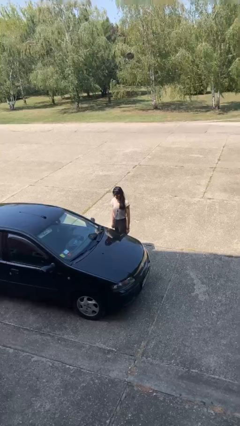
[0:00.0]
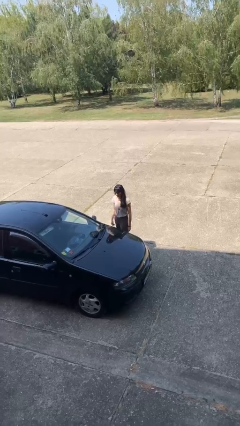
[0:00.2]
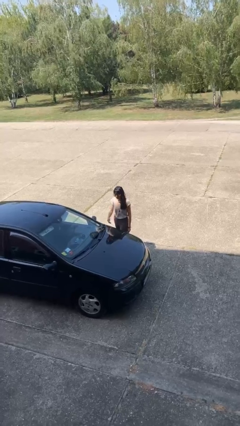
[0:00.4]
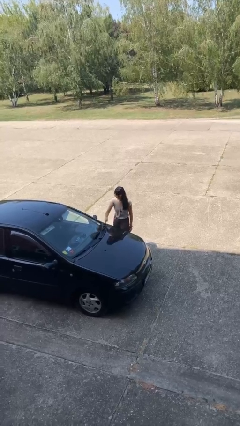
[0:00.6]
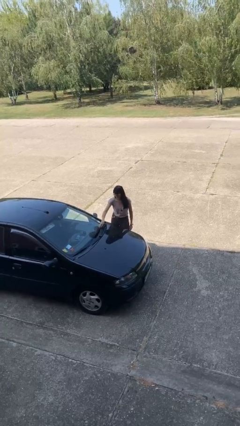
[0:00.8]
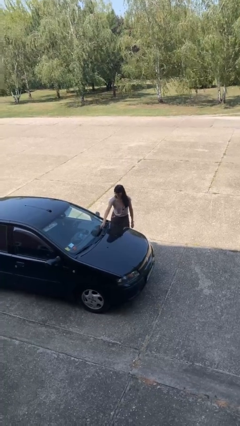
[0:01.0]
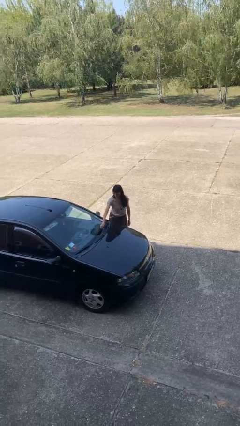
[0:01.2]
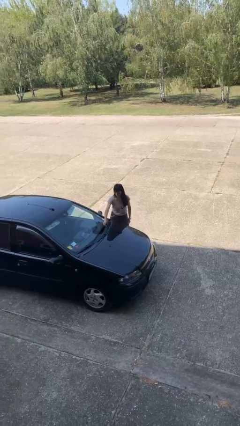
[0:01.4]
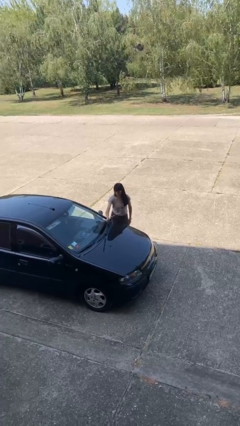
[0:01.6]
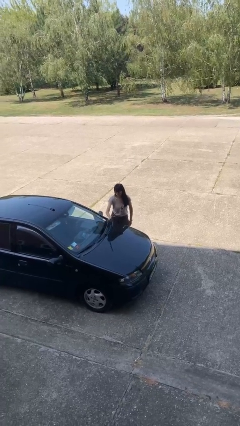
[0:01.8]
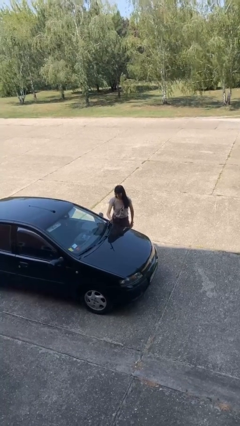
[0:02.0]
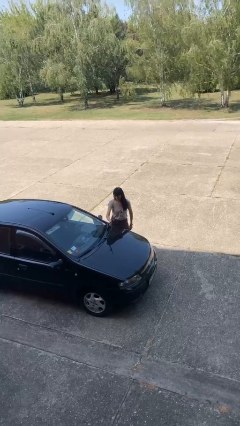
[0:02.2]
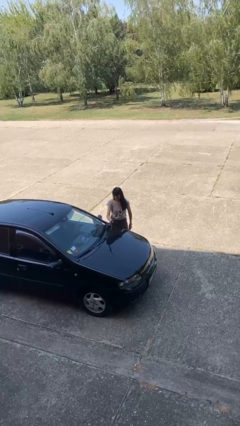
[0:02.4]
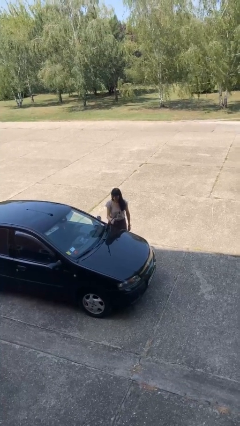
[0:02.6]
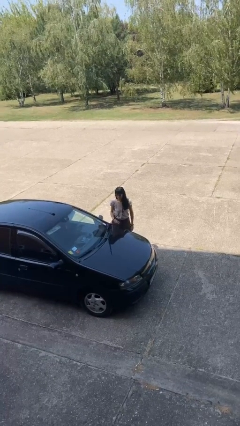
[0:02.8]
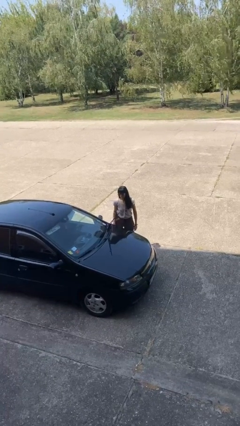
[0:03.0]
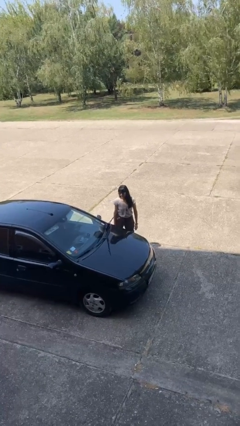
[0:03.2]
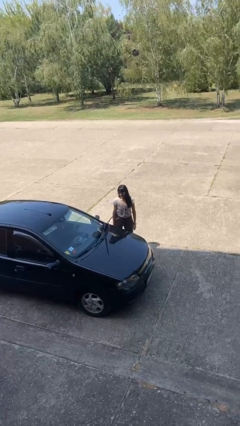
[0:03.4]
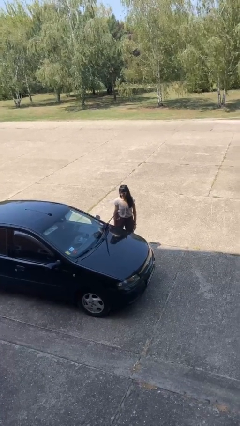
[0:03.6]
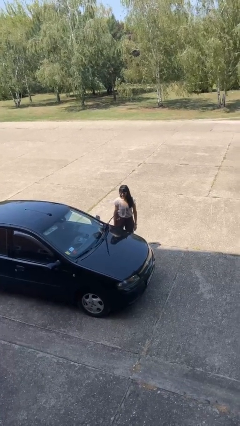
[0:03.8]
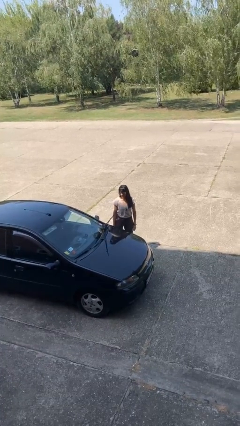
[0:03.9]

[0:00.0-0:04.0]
person flips up car wipers

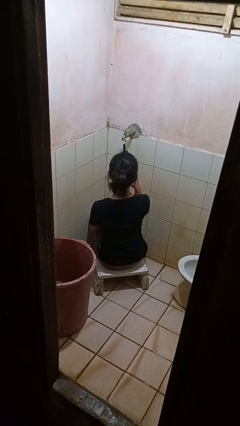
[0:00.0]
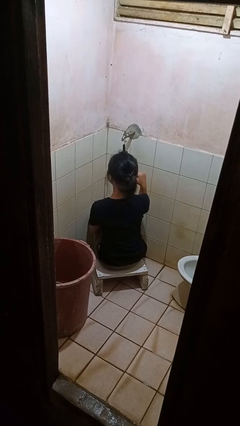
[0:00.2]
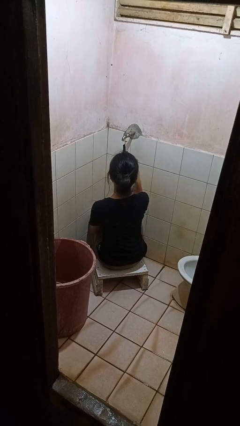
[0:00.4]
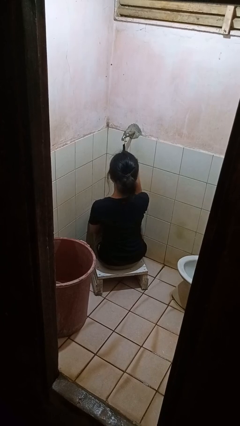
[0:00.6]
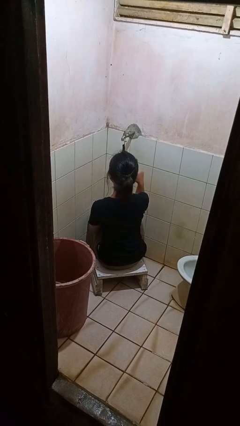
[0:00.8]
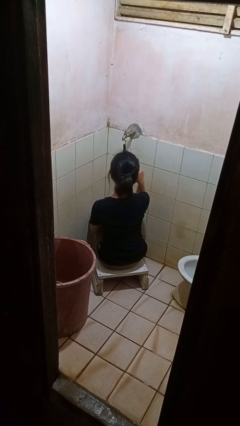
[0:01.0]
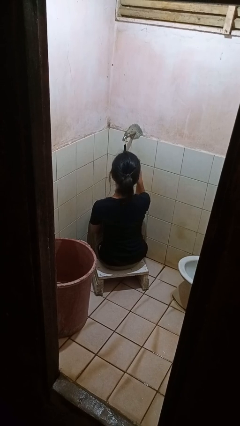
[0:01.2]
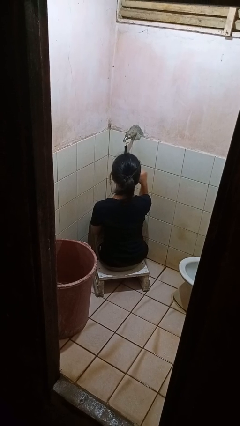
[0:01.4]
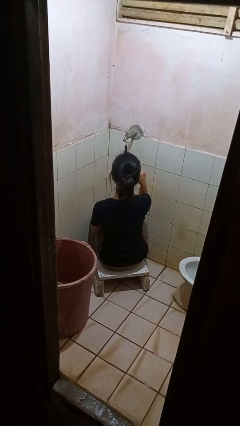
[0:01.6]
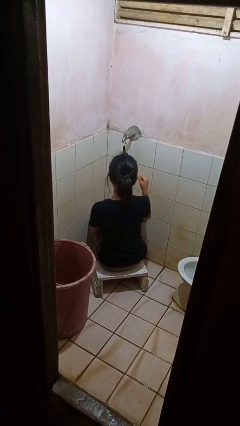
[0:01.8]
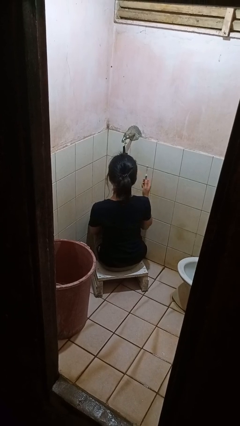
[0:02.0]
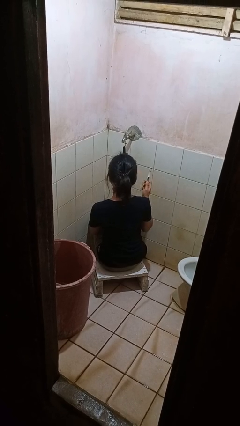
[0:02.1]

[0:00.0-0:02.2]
person brushes teeth

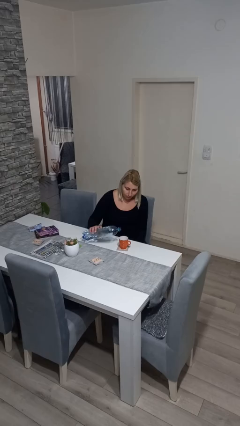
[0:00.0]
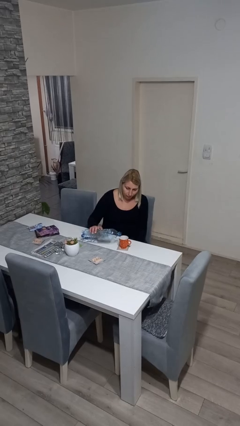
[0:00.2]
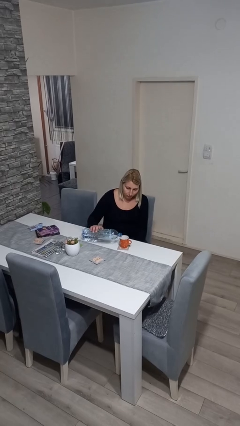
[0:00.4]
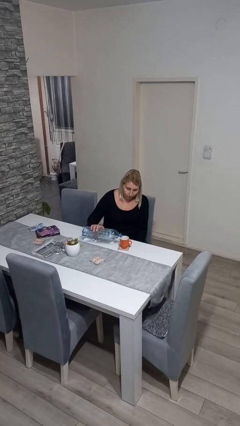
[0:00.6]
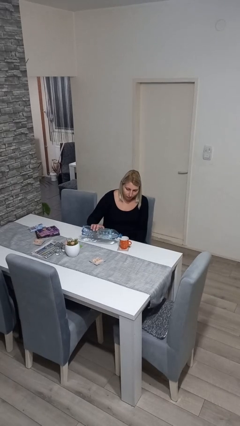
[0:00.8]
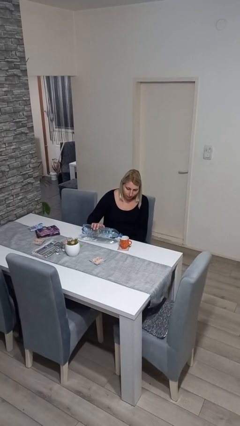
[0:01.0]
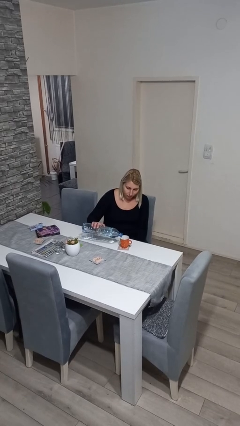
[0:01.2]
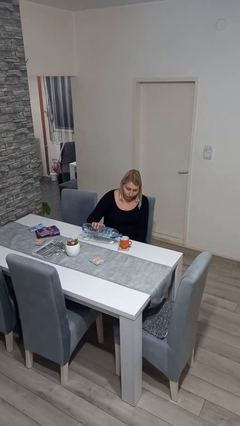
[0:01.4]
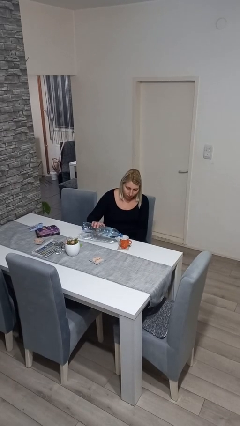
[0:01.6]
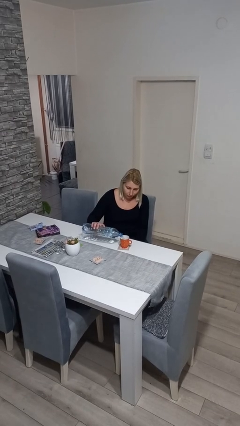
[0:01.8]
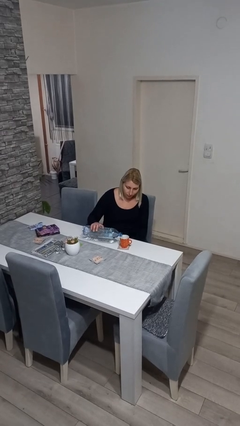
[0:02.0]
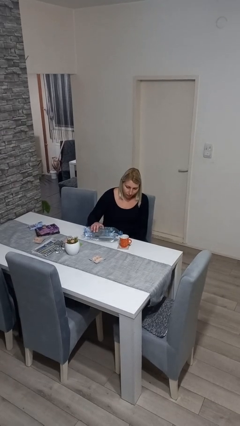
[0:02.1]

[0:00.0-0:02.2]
person pours liquid into cup

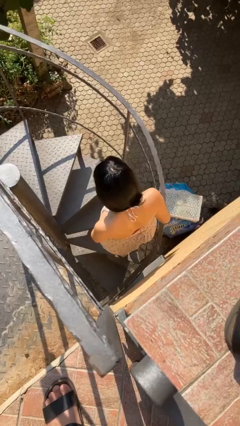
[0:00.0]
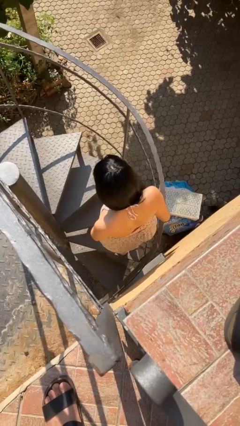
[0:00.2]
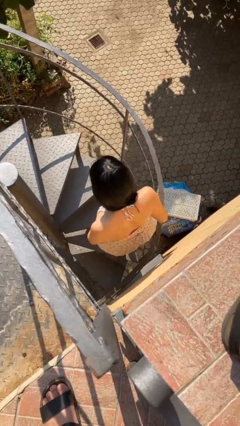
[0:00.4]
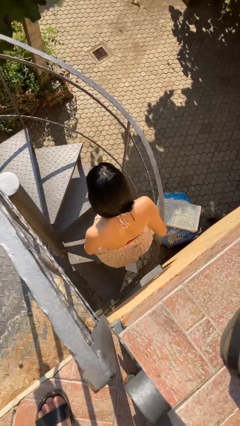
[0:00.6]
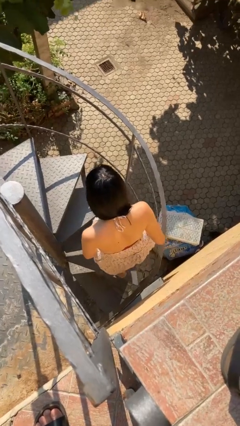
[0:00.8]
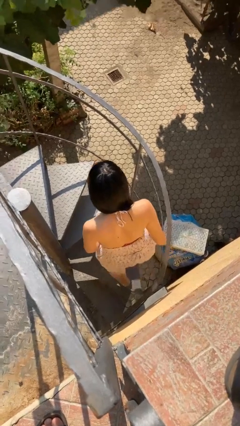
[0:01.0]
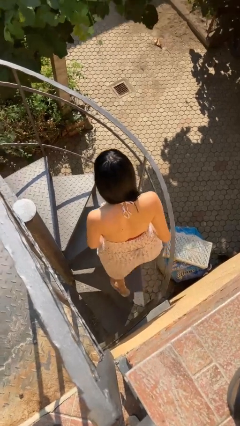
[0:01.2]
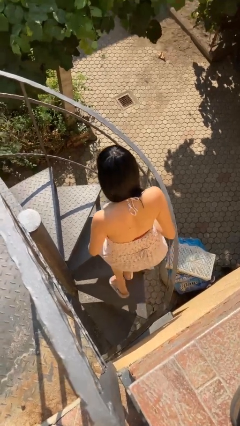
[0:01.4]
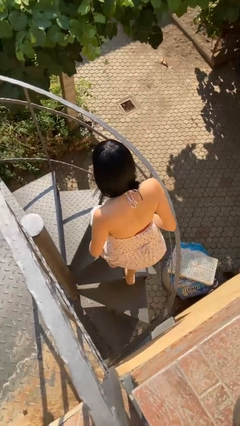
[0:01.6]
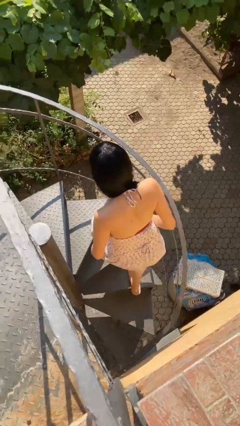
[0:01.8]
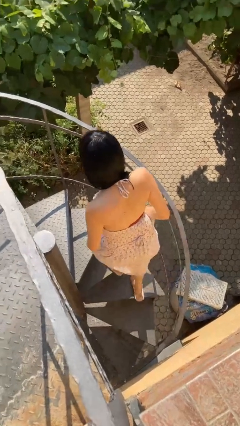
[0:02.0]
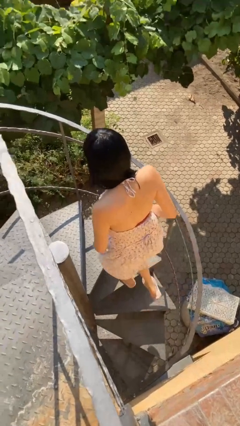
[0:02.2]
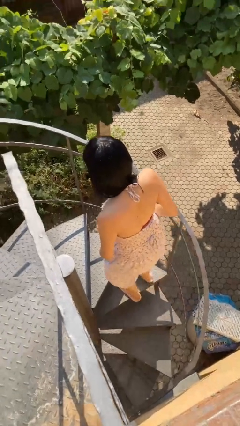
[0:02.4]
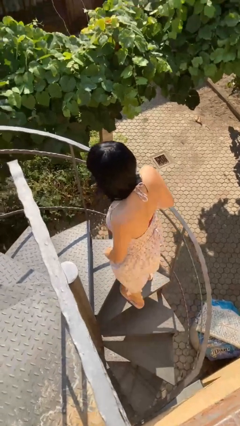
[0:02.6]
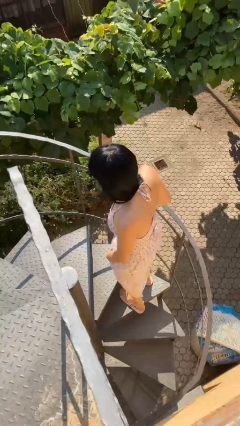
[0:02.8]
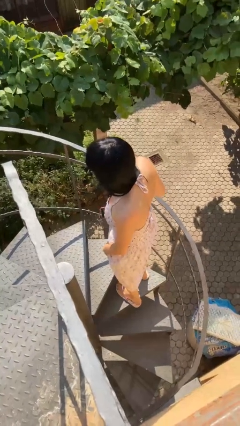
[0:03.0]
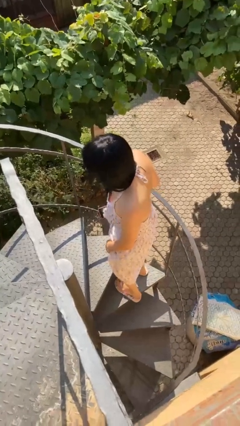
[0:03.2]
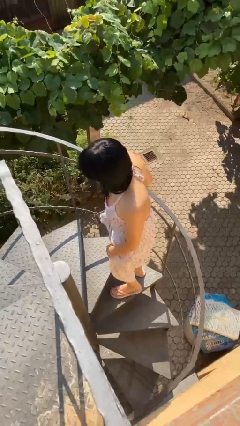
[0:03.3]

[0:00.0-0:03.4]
person climbs up stairs

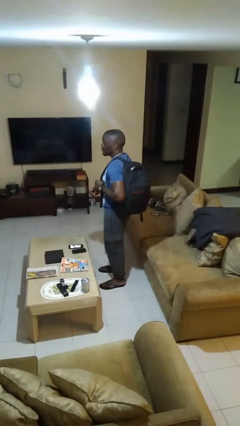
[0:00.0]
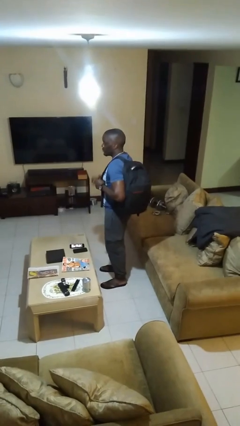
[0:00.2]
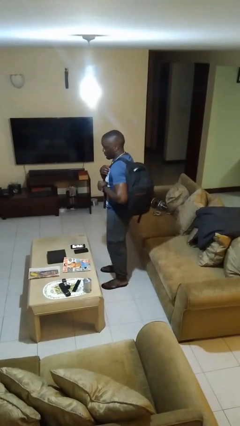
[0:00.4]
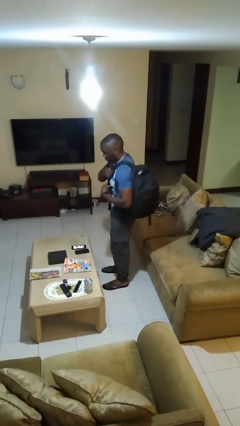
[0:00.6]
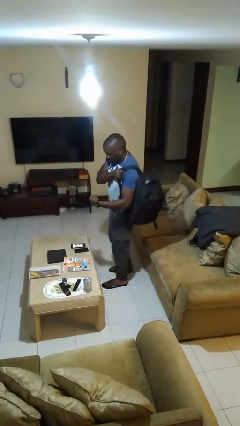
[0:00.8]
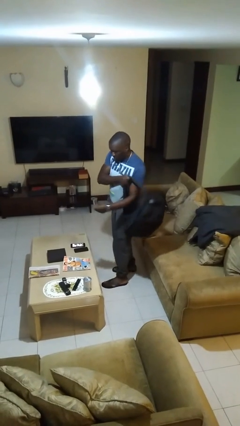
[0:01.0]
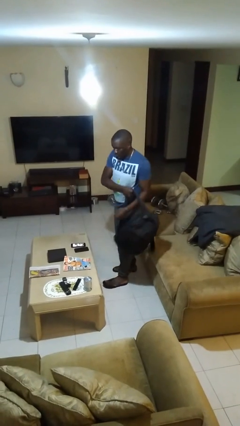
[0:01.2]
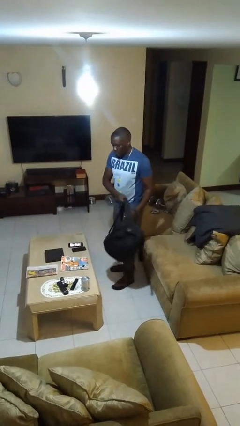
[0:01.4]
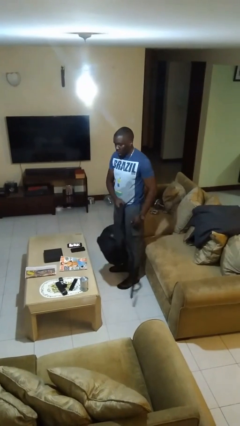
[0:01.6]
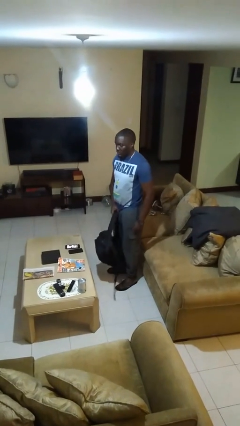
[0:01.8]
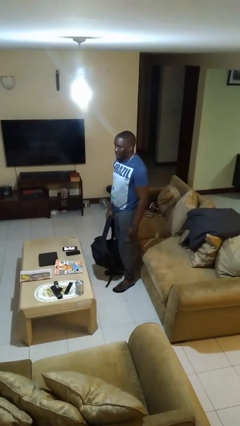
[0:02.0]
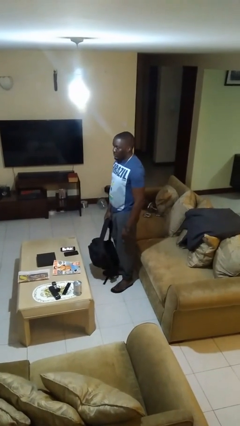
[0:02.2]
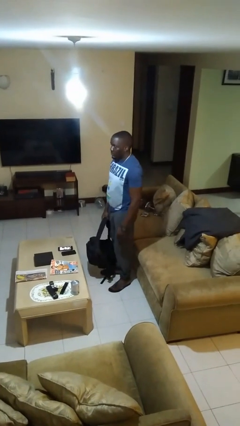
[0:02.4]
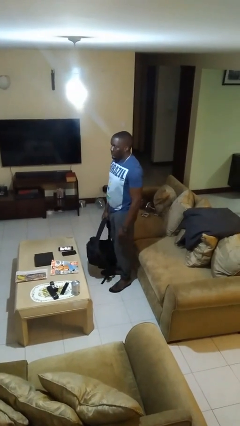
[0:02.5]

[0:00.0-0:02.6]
person takes off backpack

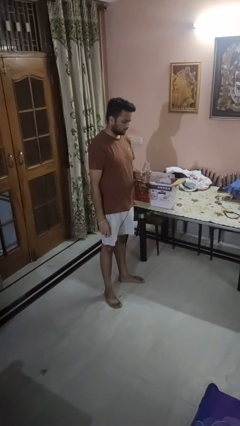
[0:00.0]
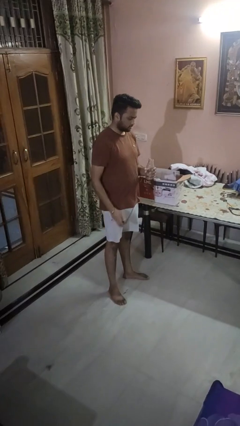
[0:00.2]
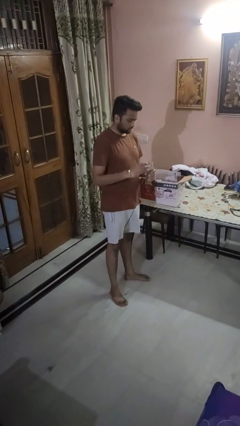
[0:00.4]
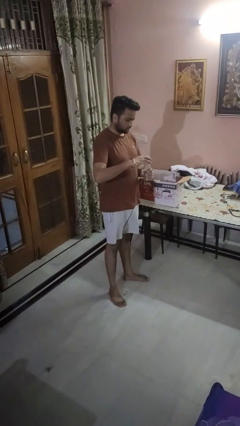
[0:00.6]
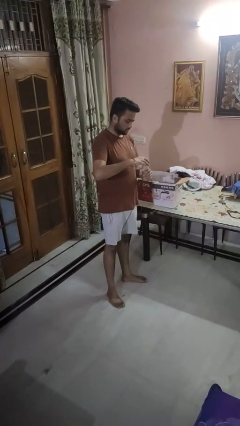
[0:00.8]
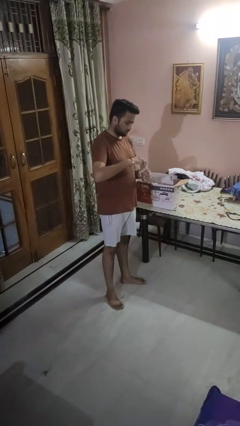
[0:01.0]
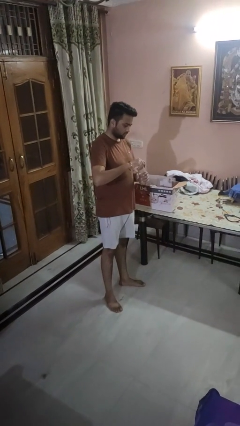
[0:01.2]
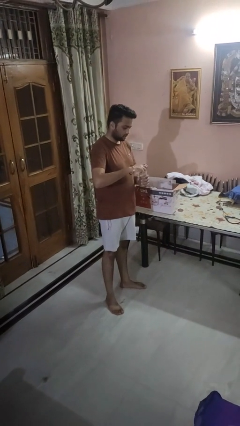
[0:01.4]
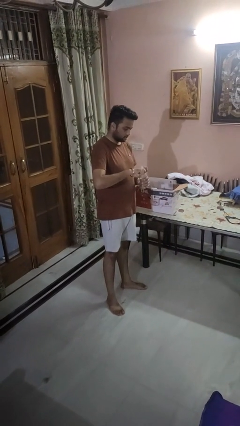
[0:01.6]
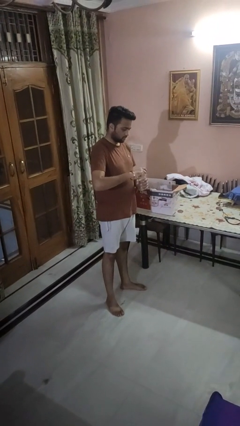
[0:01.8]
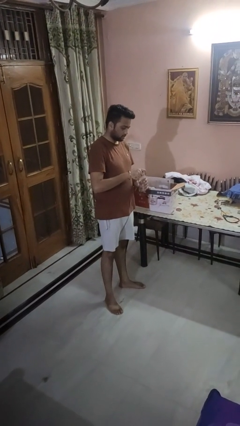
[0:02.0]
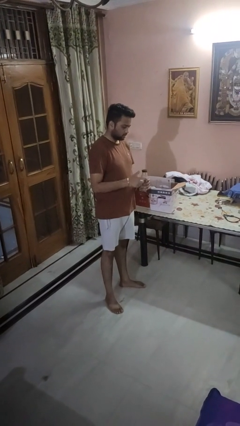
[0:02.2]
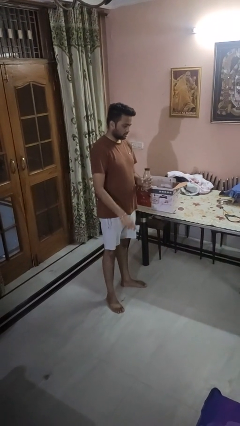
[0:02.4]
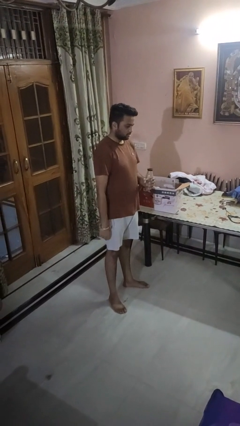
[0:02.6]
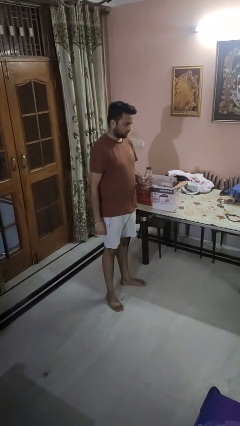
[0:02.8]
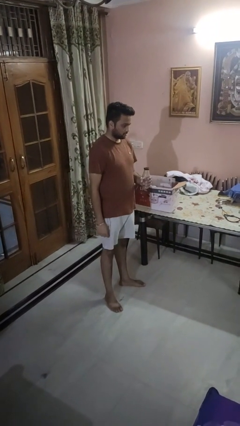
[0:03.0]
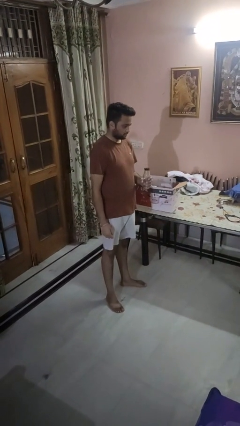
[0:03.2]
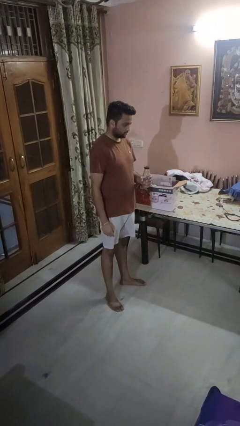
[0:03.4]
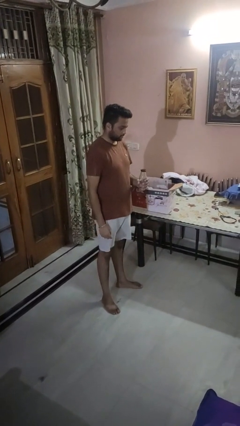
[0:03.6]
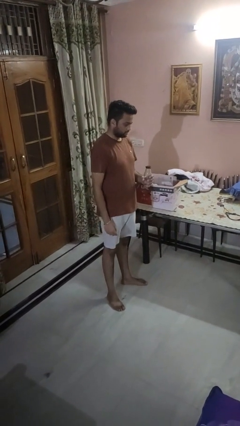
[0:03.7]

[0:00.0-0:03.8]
person screws lid to bottle
